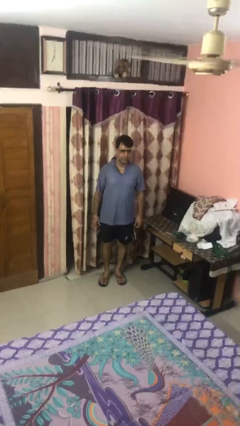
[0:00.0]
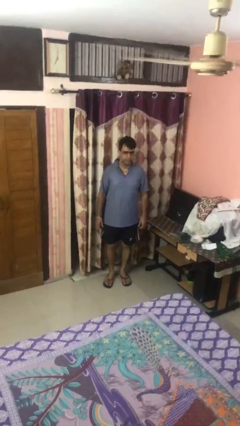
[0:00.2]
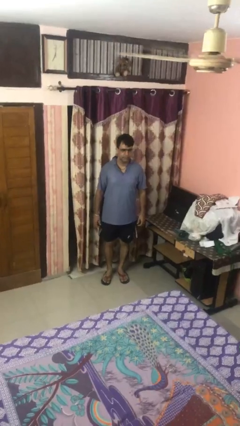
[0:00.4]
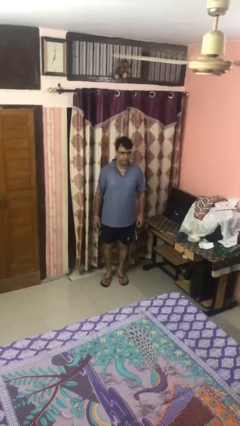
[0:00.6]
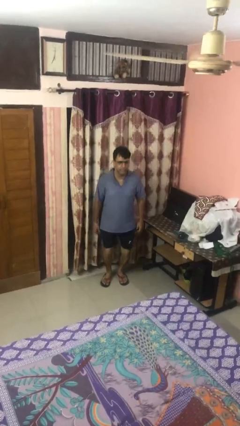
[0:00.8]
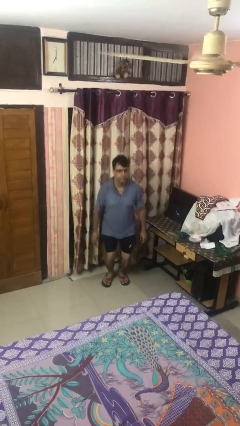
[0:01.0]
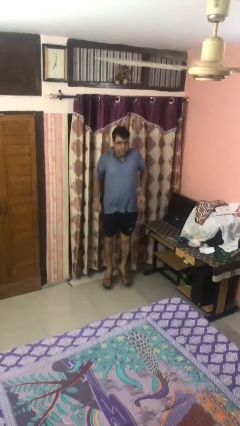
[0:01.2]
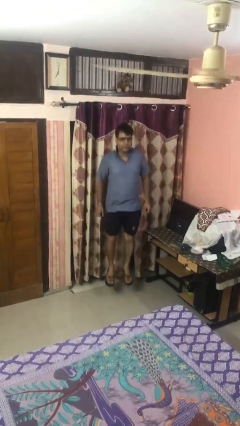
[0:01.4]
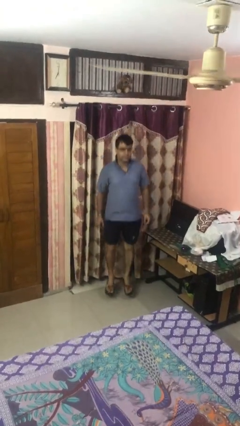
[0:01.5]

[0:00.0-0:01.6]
person jumps

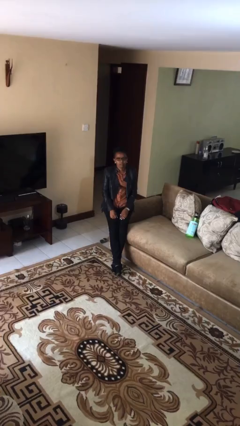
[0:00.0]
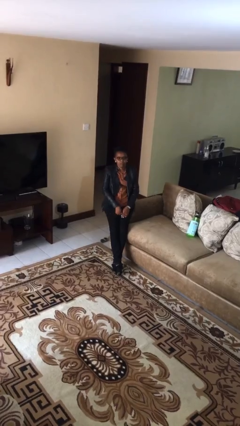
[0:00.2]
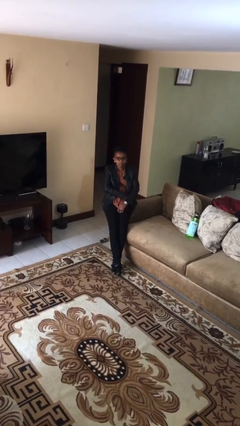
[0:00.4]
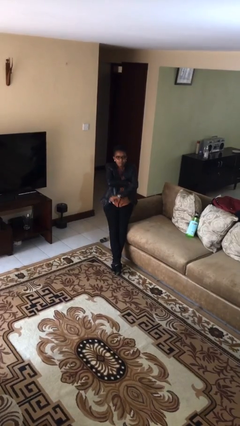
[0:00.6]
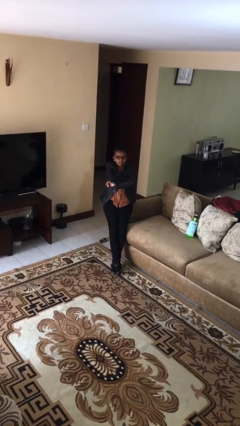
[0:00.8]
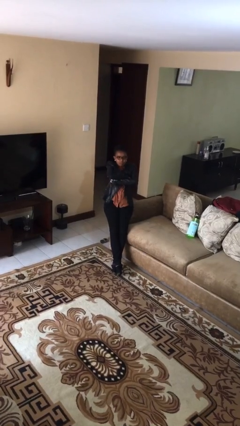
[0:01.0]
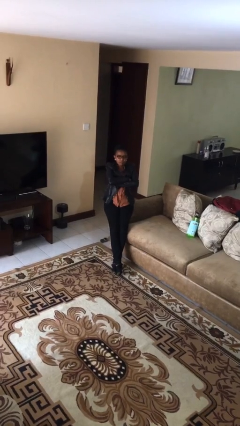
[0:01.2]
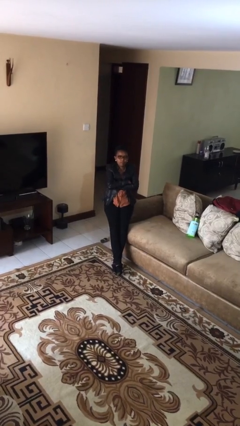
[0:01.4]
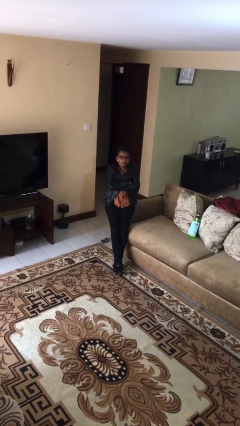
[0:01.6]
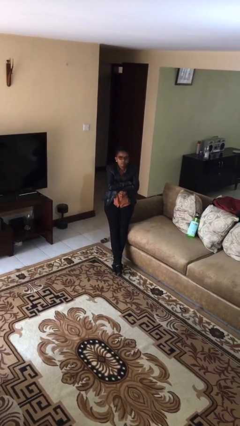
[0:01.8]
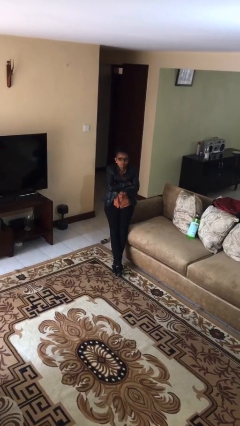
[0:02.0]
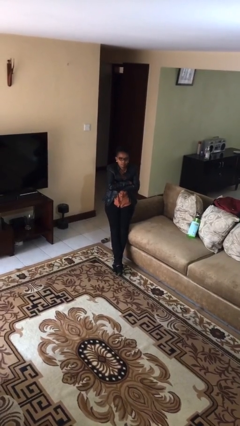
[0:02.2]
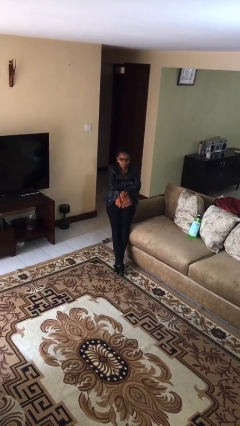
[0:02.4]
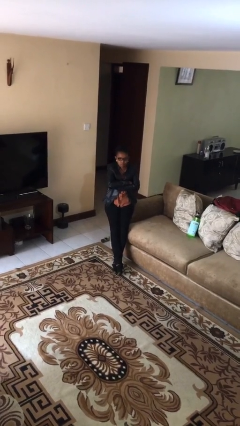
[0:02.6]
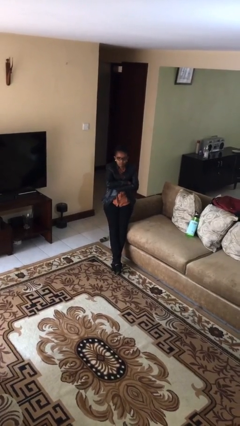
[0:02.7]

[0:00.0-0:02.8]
person crosses arms

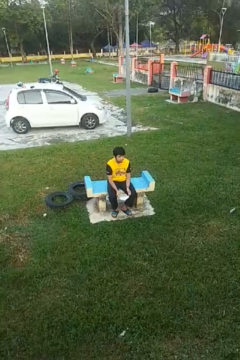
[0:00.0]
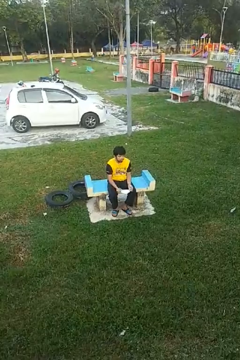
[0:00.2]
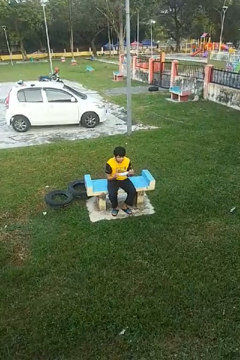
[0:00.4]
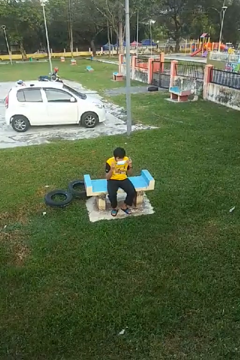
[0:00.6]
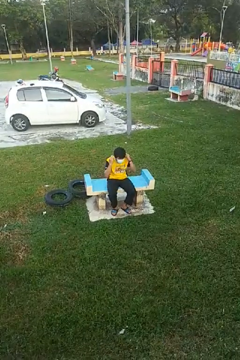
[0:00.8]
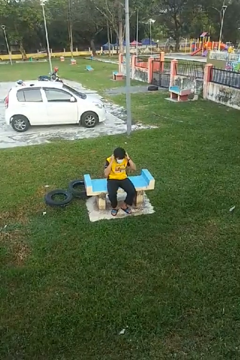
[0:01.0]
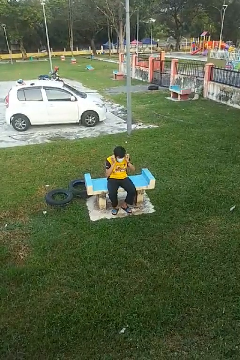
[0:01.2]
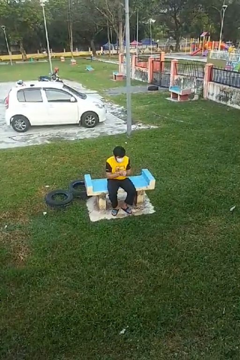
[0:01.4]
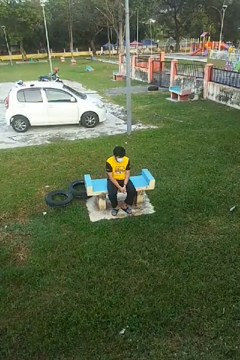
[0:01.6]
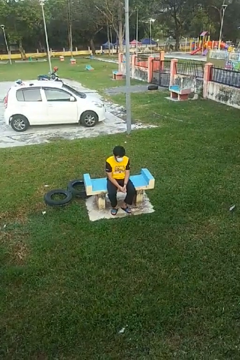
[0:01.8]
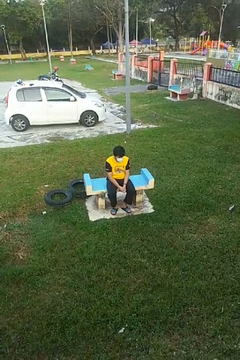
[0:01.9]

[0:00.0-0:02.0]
person puts on facemask

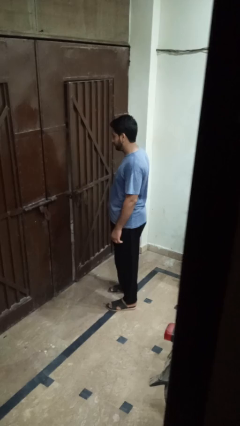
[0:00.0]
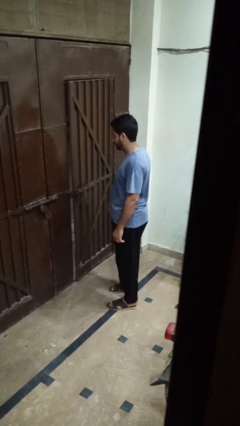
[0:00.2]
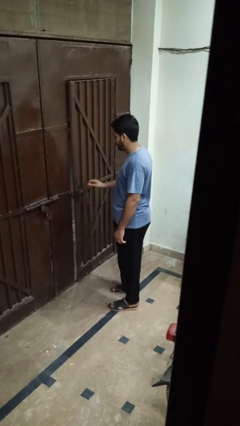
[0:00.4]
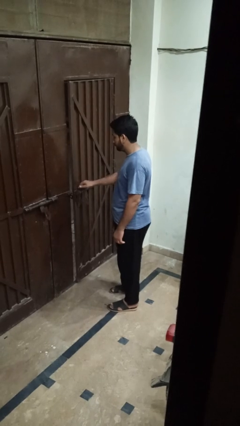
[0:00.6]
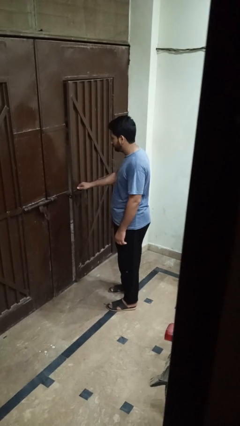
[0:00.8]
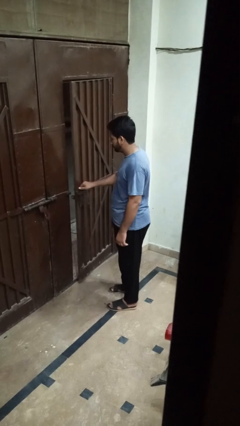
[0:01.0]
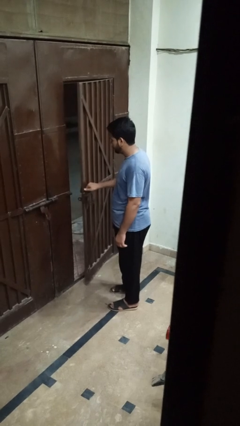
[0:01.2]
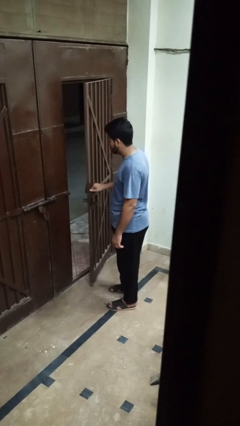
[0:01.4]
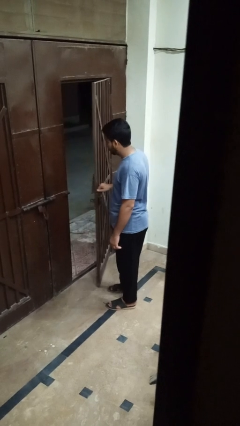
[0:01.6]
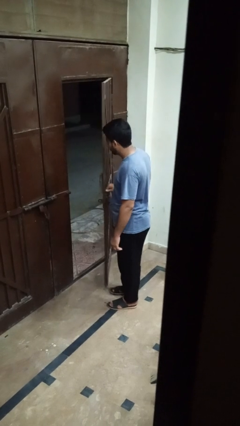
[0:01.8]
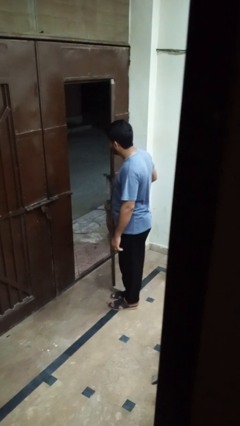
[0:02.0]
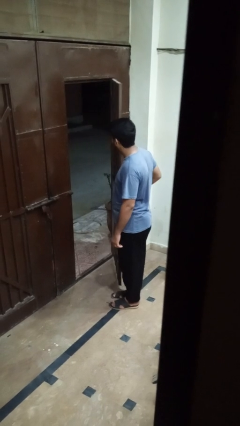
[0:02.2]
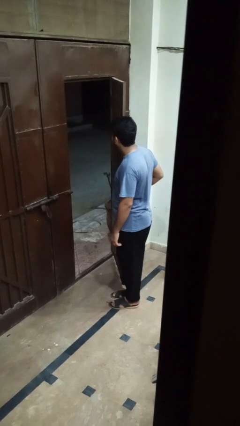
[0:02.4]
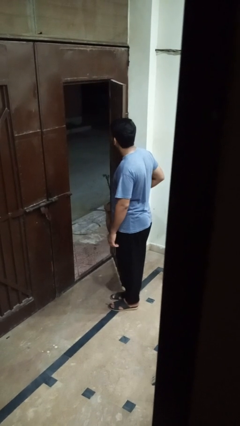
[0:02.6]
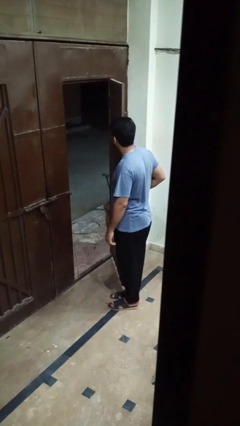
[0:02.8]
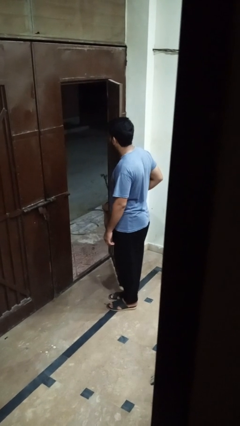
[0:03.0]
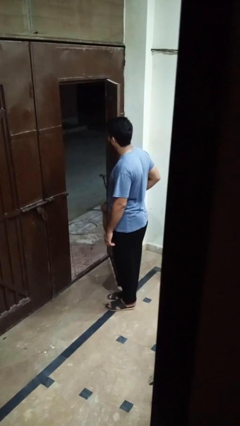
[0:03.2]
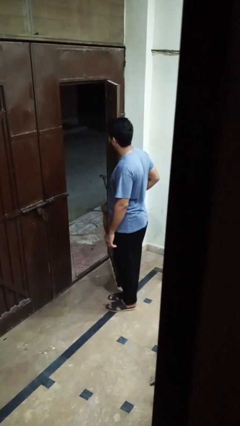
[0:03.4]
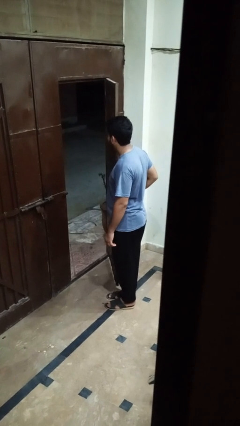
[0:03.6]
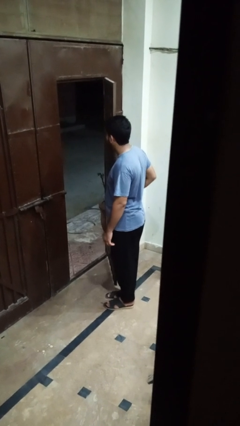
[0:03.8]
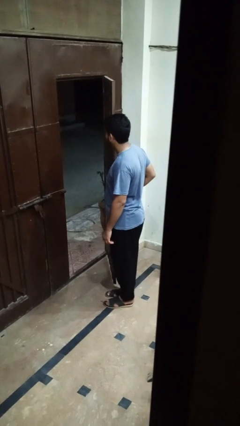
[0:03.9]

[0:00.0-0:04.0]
person opens gate

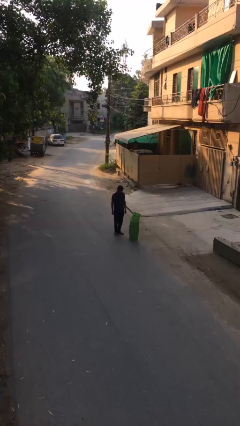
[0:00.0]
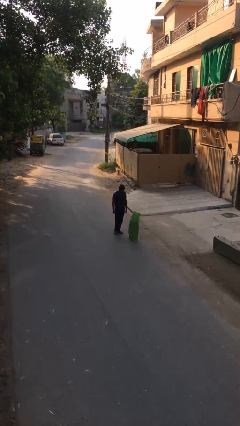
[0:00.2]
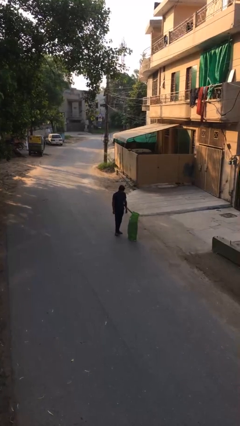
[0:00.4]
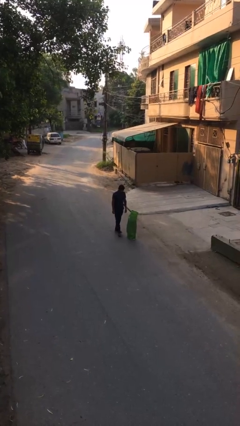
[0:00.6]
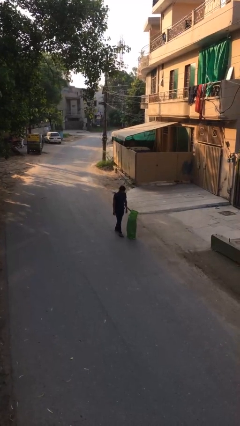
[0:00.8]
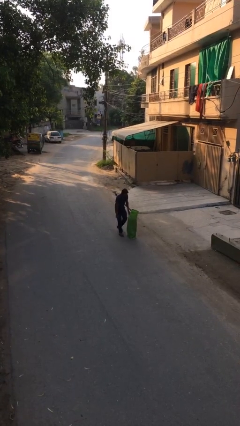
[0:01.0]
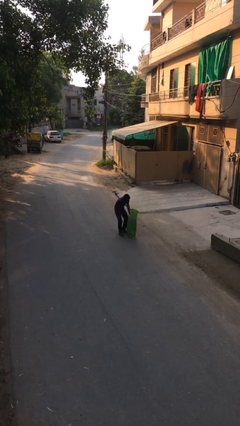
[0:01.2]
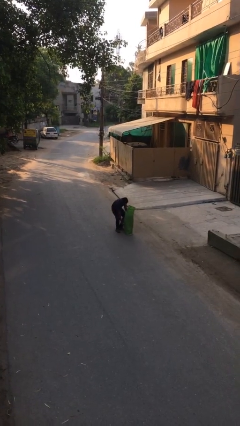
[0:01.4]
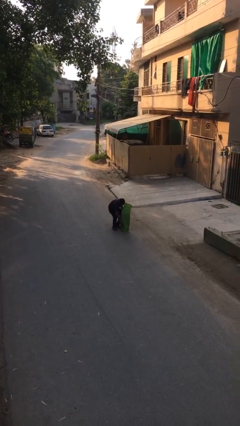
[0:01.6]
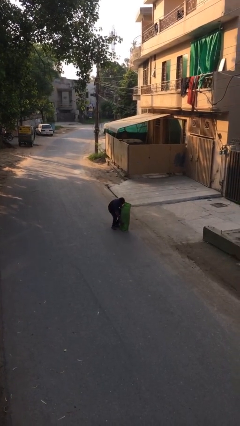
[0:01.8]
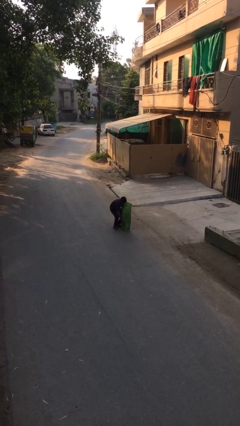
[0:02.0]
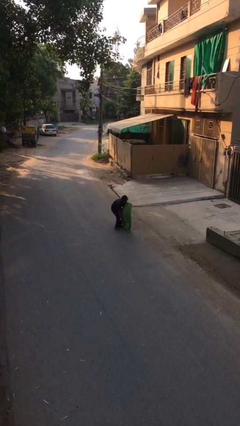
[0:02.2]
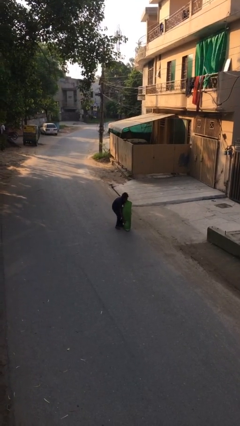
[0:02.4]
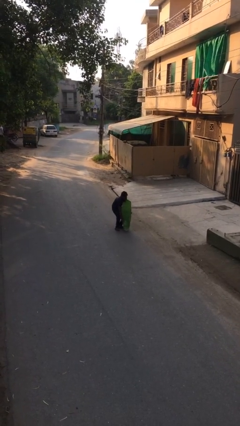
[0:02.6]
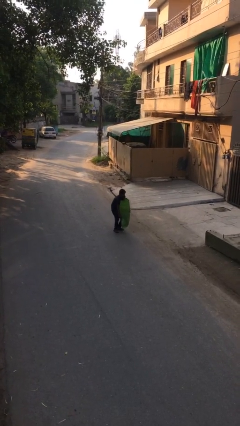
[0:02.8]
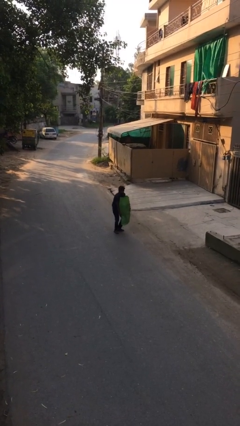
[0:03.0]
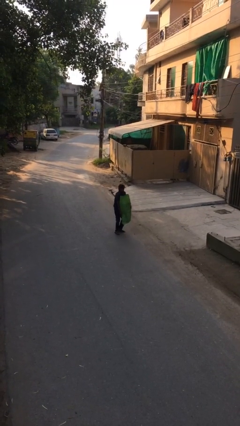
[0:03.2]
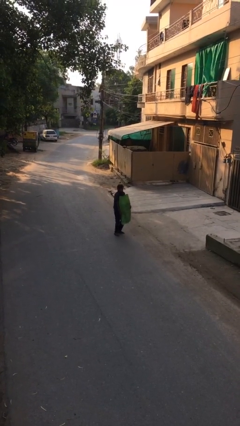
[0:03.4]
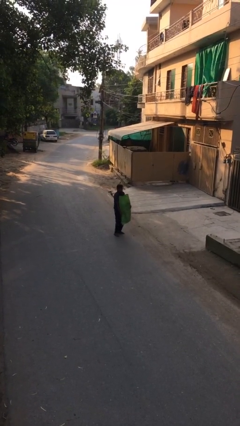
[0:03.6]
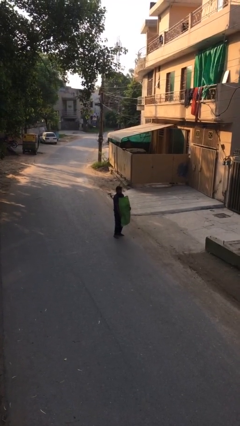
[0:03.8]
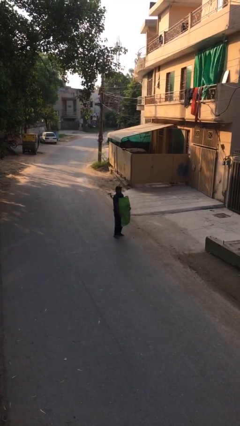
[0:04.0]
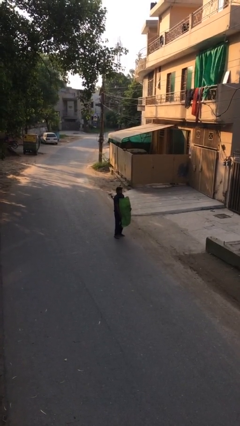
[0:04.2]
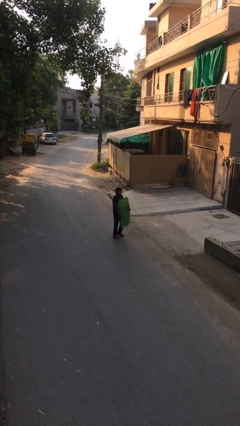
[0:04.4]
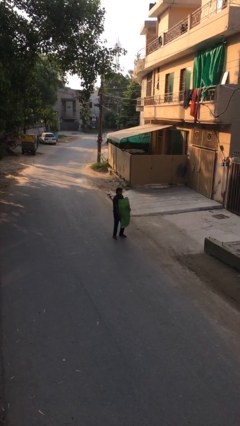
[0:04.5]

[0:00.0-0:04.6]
person picks up object from floor

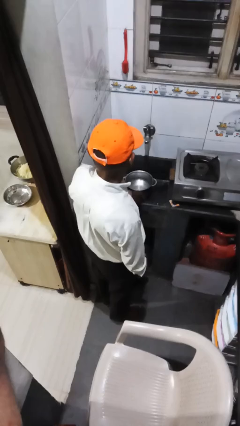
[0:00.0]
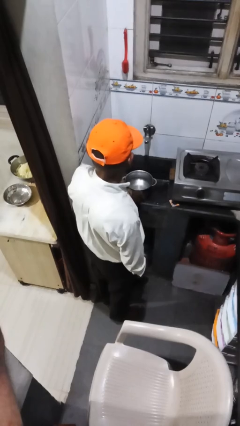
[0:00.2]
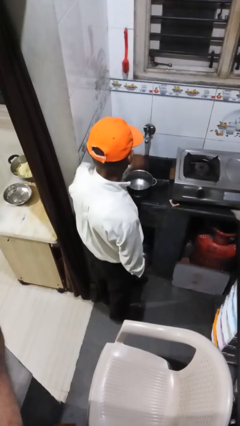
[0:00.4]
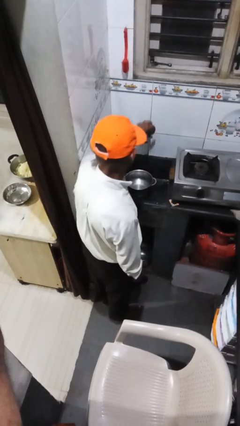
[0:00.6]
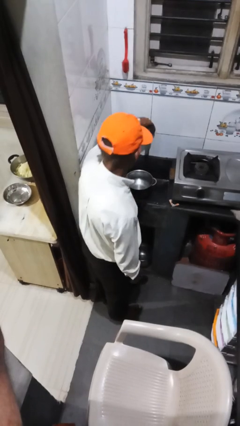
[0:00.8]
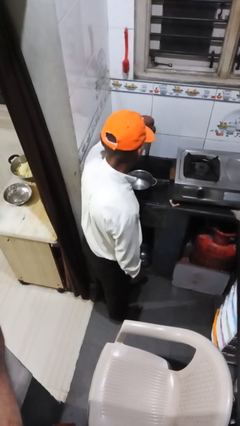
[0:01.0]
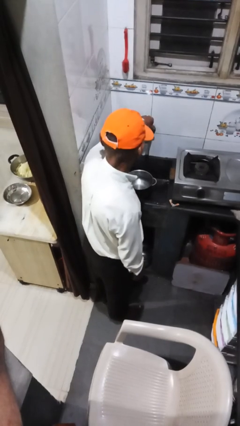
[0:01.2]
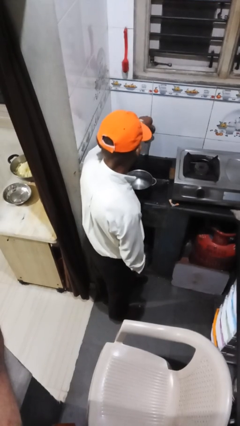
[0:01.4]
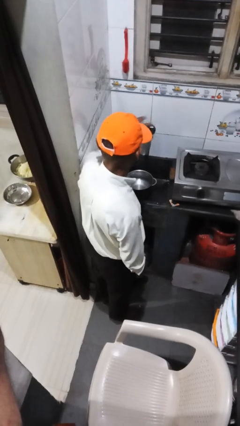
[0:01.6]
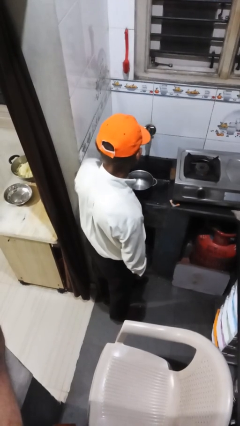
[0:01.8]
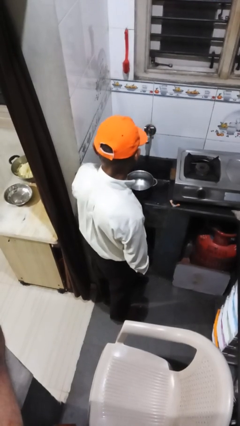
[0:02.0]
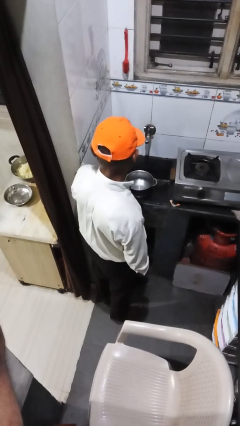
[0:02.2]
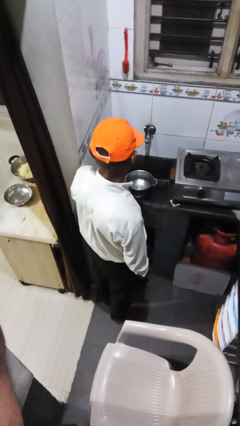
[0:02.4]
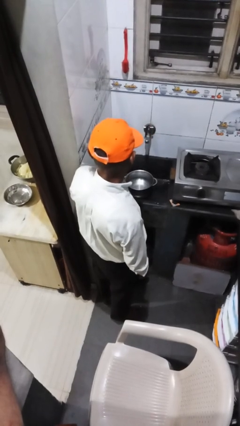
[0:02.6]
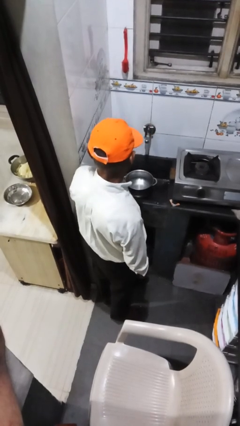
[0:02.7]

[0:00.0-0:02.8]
person turns on faucet
